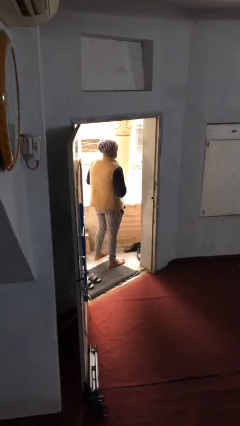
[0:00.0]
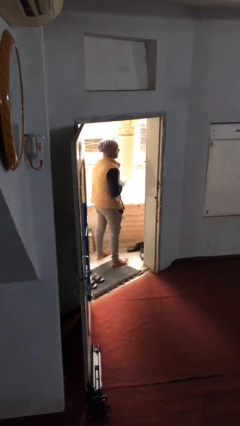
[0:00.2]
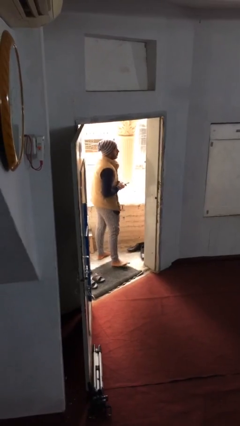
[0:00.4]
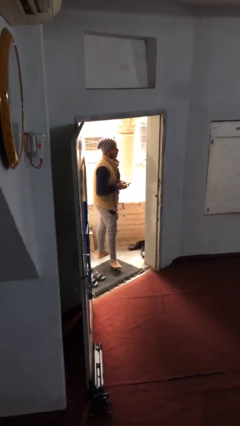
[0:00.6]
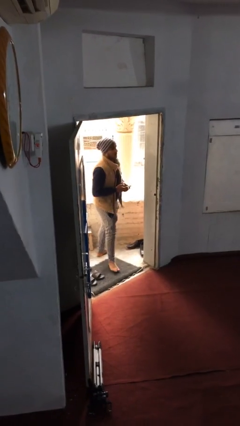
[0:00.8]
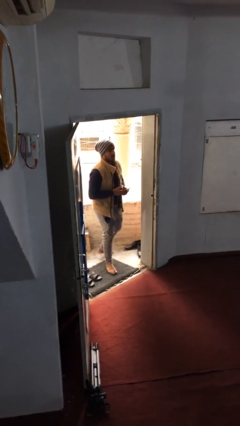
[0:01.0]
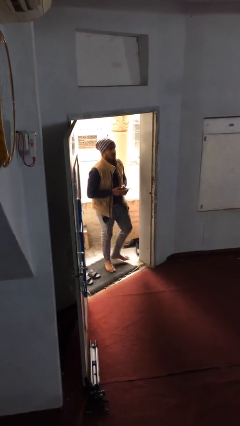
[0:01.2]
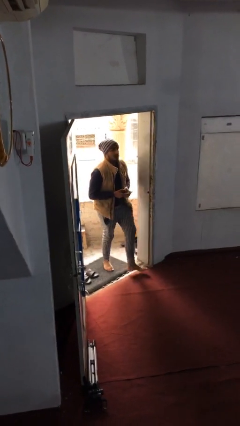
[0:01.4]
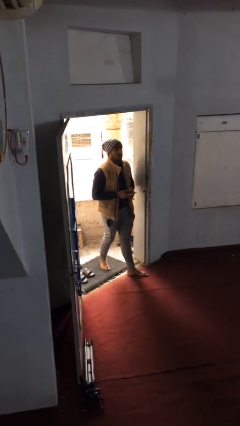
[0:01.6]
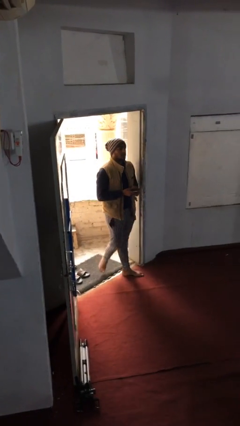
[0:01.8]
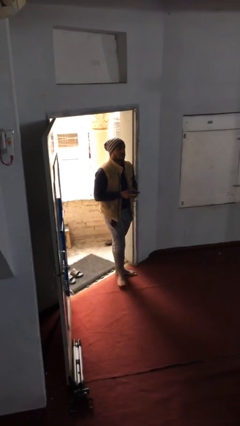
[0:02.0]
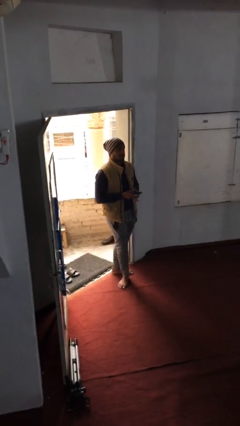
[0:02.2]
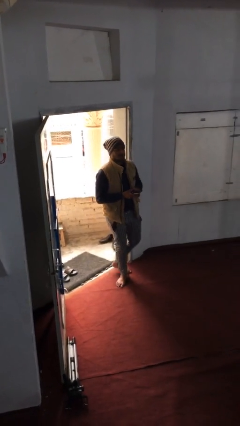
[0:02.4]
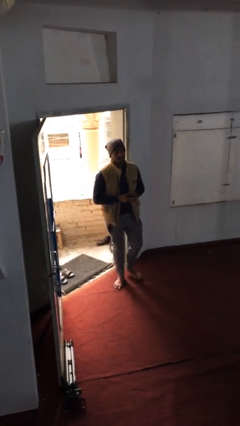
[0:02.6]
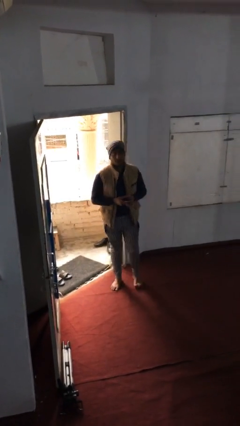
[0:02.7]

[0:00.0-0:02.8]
person enters scene through structure

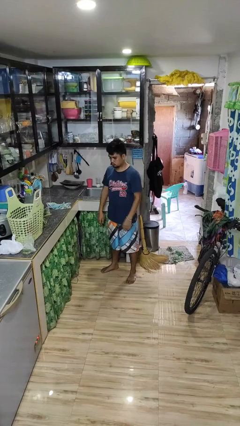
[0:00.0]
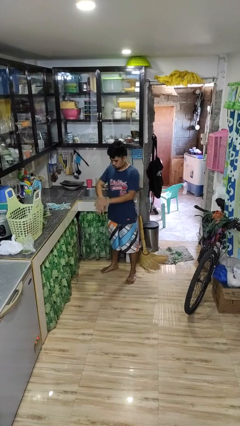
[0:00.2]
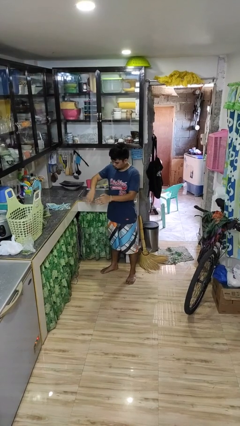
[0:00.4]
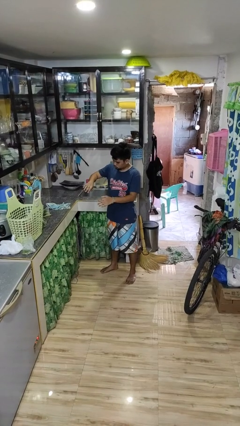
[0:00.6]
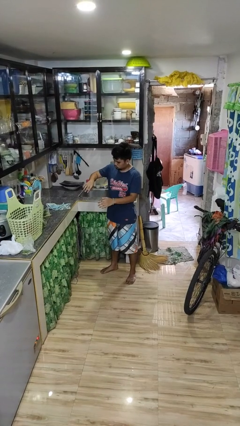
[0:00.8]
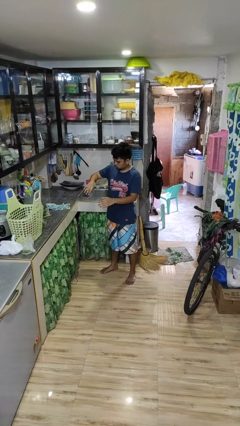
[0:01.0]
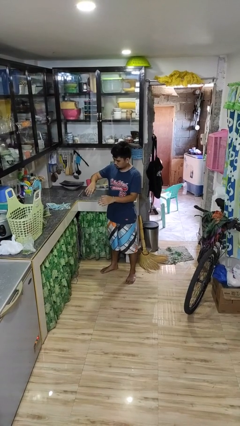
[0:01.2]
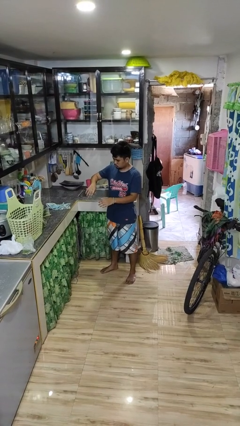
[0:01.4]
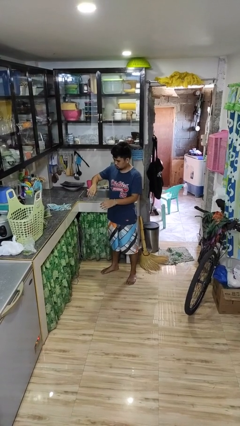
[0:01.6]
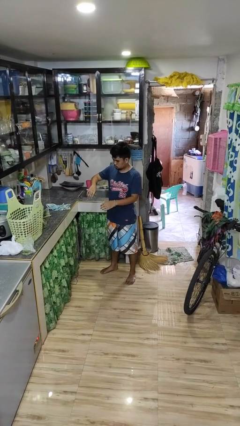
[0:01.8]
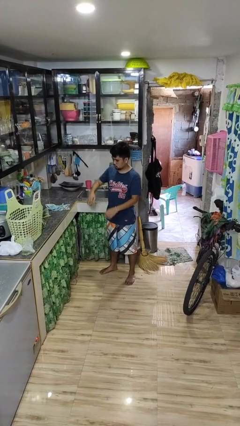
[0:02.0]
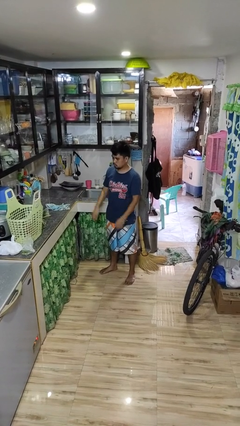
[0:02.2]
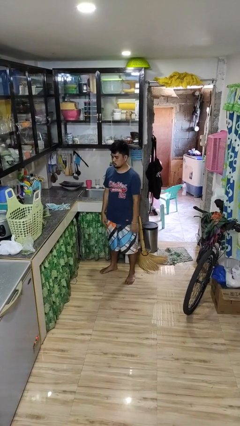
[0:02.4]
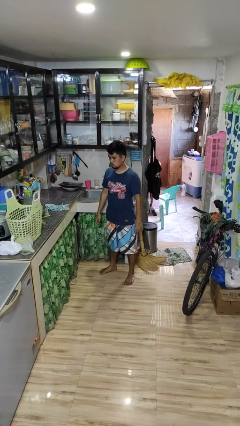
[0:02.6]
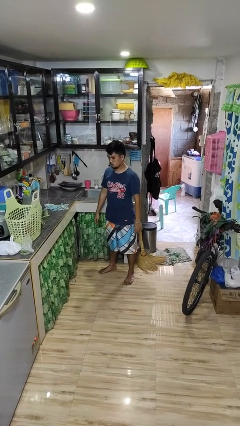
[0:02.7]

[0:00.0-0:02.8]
person swats bug

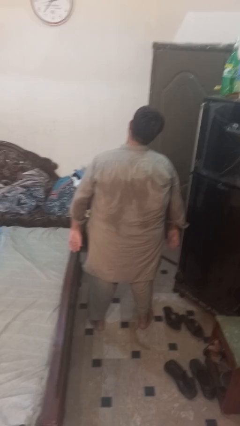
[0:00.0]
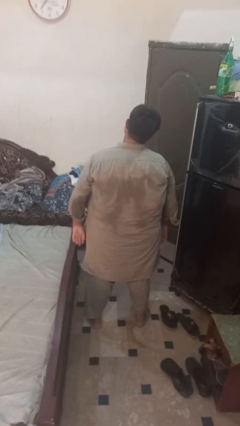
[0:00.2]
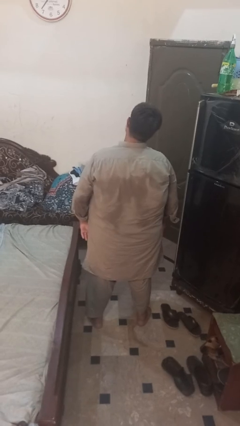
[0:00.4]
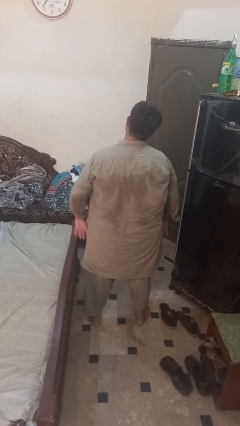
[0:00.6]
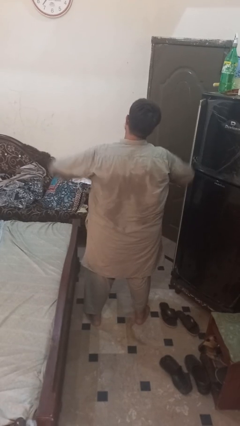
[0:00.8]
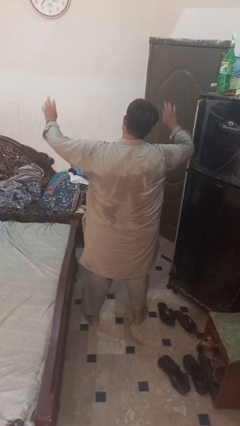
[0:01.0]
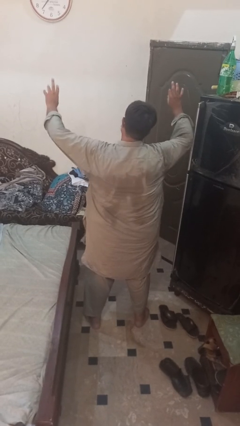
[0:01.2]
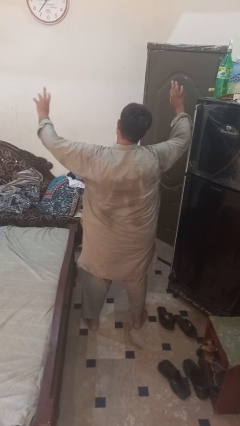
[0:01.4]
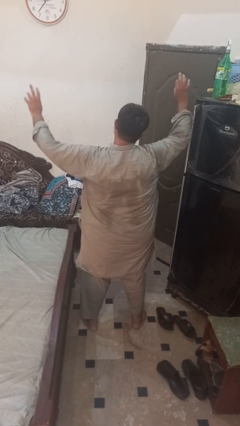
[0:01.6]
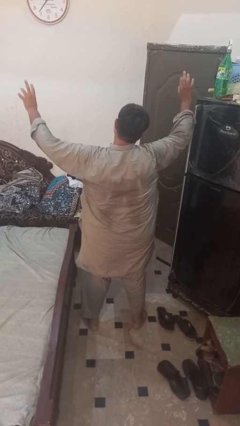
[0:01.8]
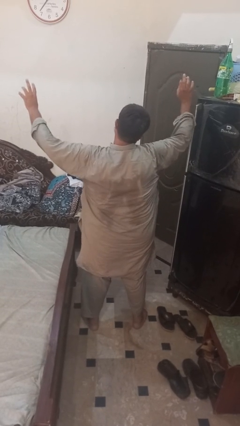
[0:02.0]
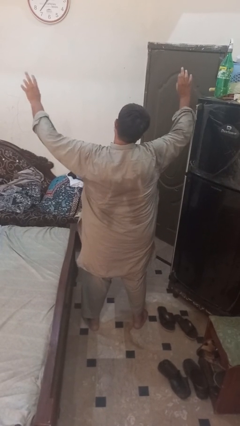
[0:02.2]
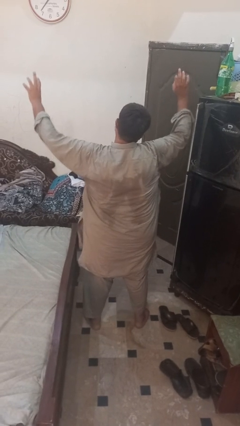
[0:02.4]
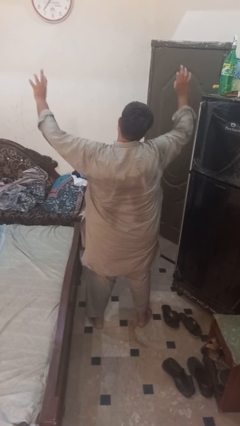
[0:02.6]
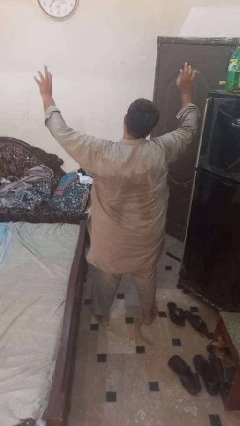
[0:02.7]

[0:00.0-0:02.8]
person dances in place

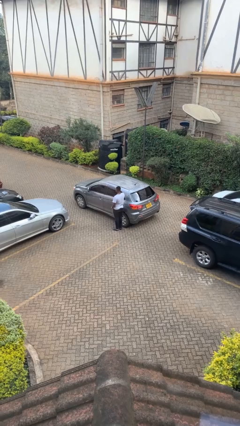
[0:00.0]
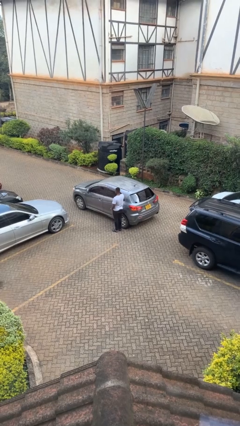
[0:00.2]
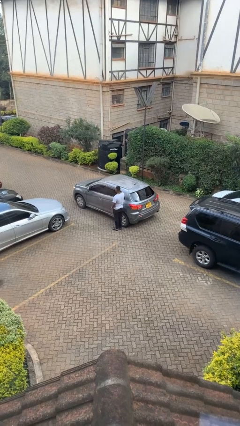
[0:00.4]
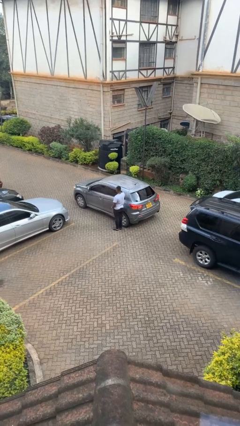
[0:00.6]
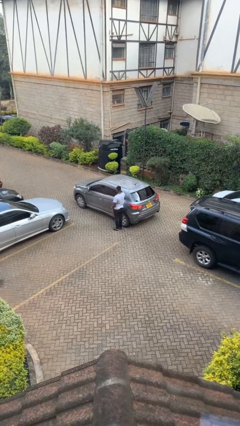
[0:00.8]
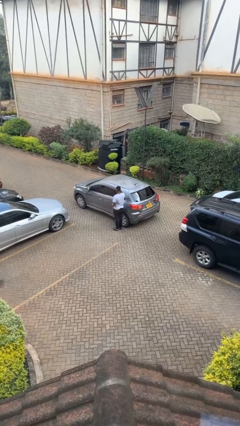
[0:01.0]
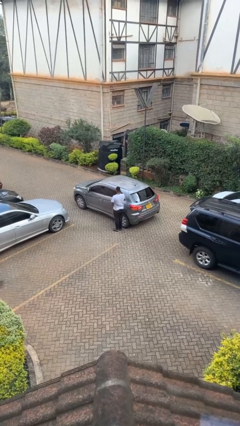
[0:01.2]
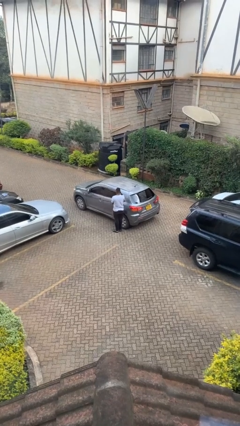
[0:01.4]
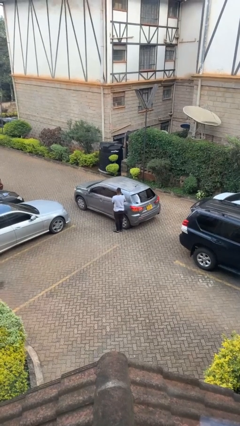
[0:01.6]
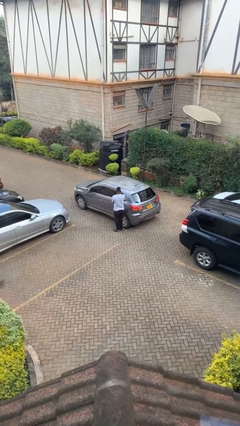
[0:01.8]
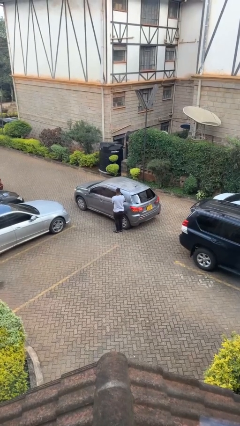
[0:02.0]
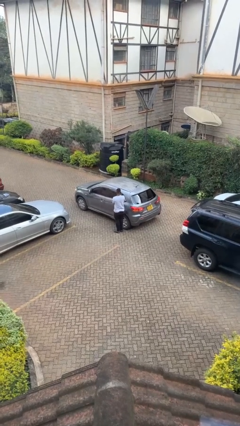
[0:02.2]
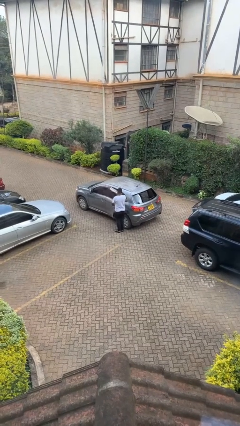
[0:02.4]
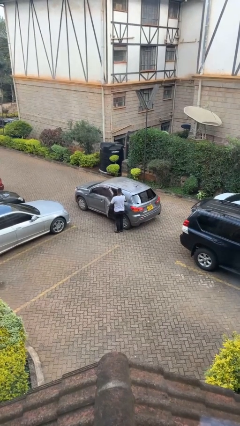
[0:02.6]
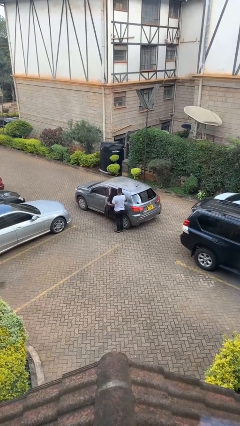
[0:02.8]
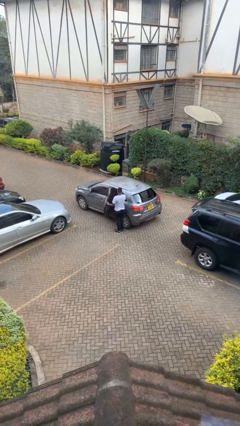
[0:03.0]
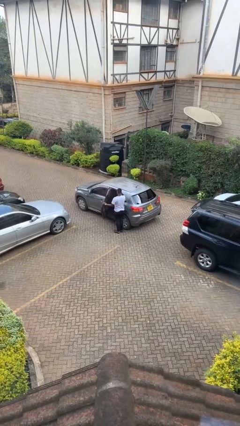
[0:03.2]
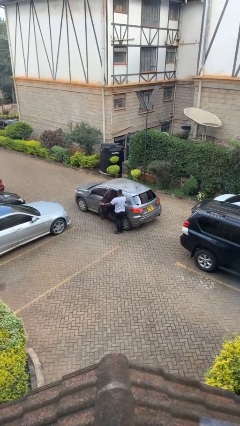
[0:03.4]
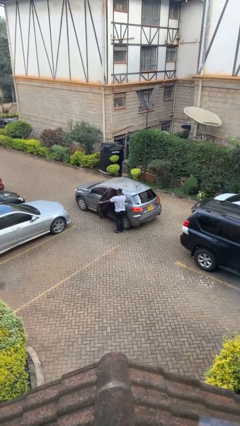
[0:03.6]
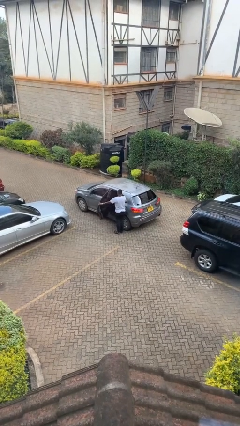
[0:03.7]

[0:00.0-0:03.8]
person opens car door

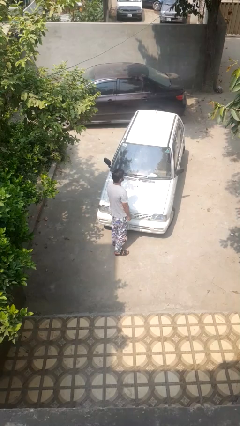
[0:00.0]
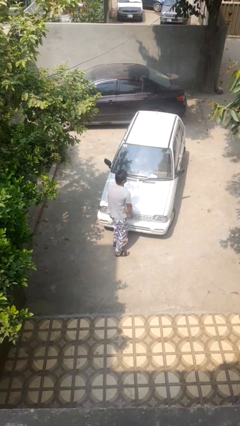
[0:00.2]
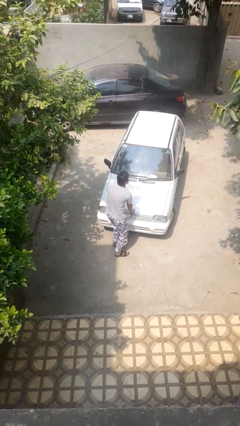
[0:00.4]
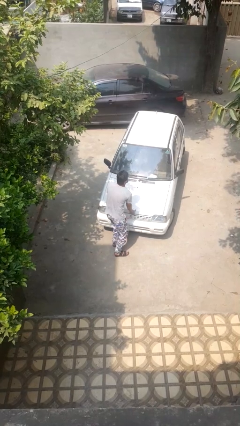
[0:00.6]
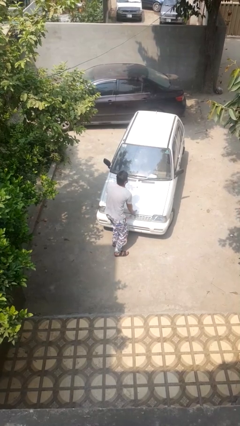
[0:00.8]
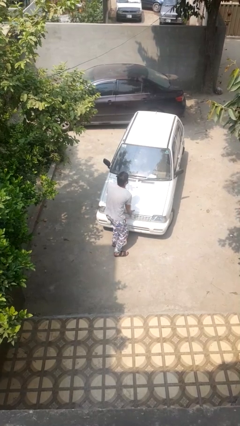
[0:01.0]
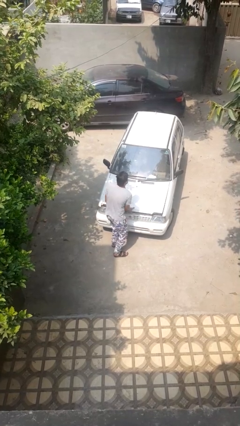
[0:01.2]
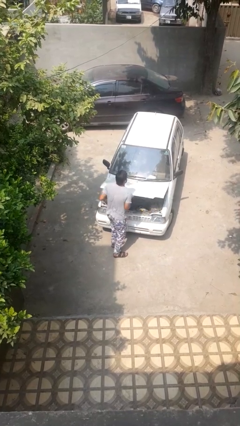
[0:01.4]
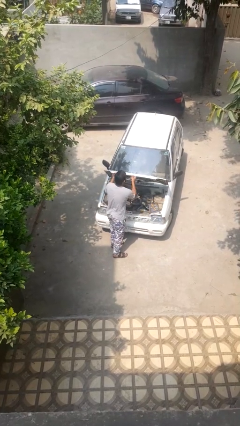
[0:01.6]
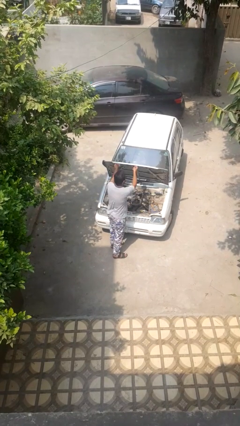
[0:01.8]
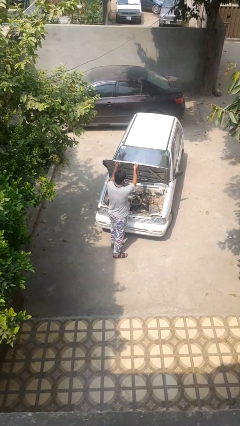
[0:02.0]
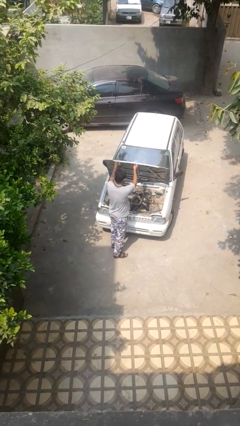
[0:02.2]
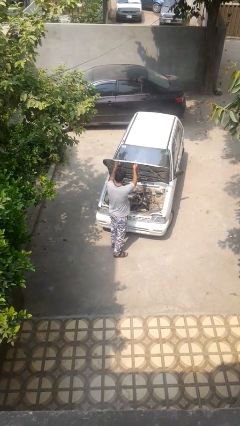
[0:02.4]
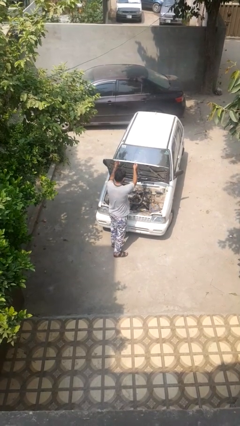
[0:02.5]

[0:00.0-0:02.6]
person opens car hood

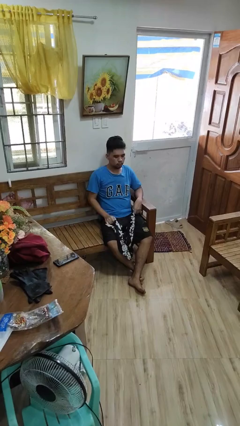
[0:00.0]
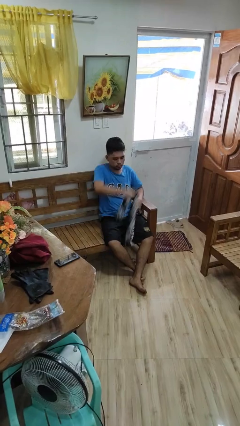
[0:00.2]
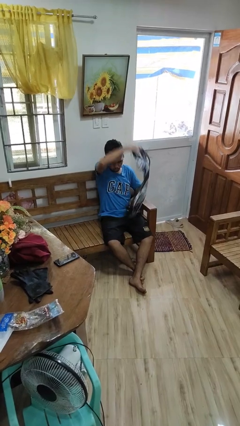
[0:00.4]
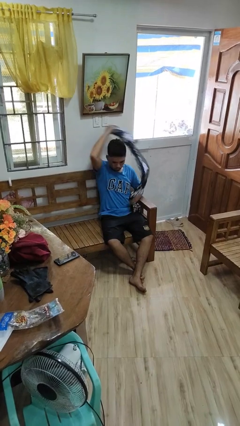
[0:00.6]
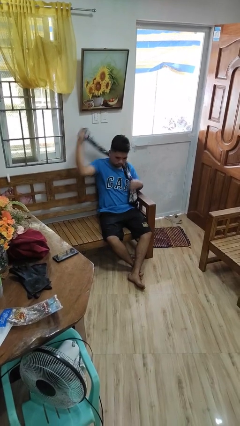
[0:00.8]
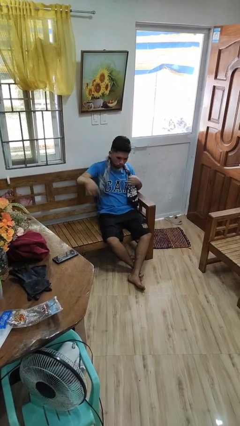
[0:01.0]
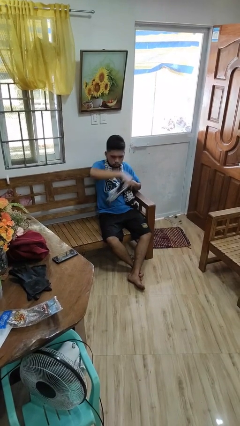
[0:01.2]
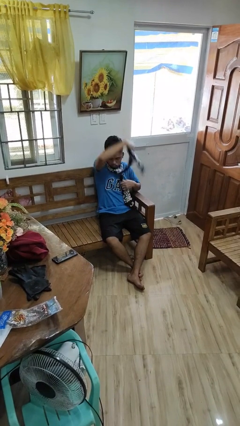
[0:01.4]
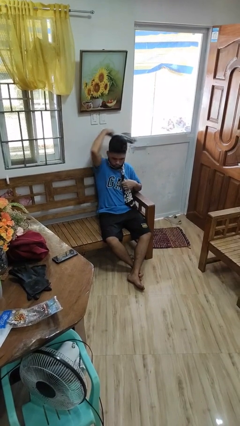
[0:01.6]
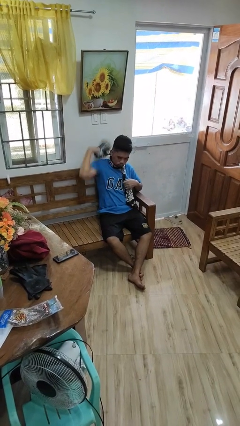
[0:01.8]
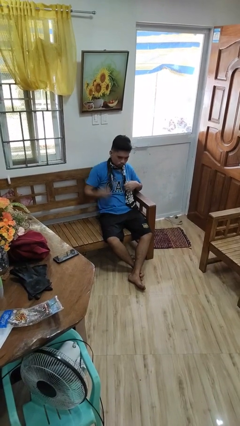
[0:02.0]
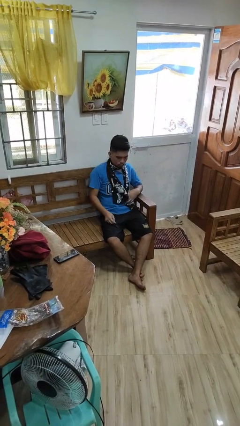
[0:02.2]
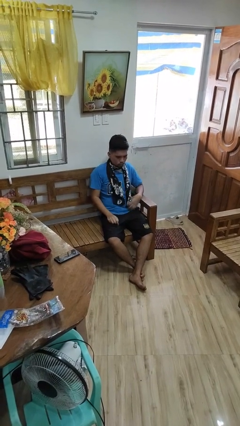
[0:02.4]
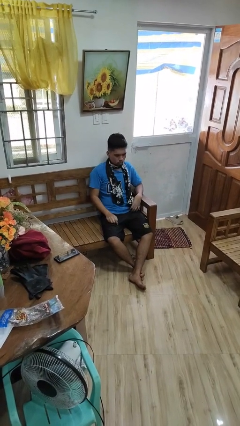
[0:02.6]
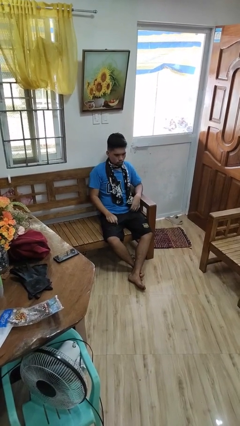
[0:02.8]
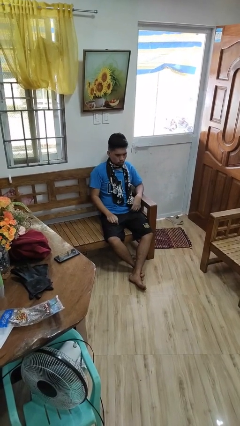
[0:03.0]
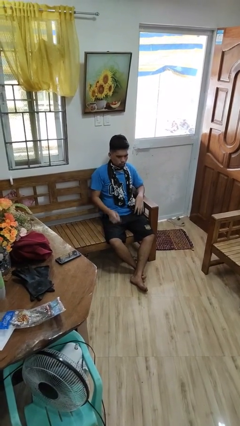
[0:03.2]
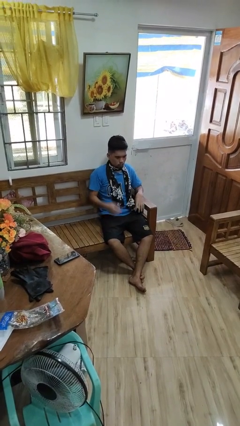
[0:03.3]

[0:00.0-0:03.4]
person puts on scarf
